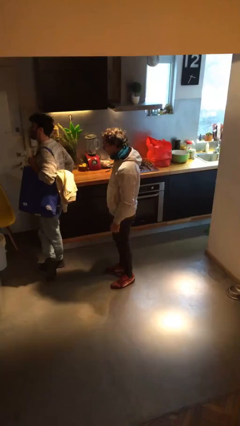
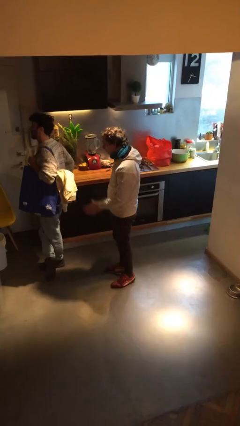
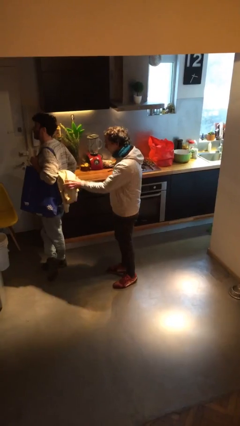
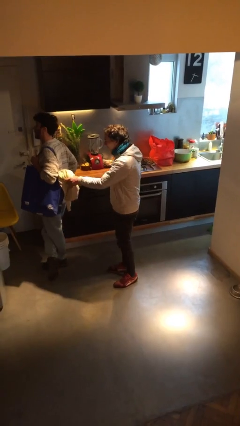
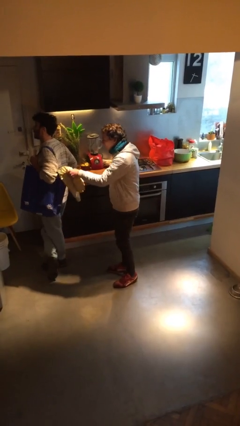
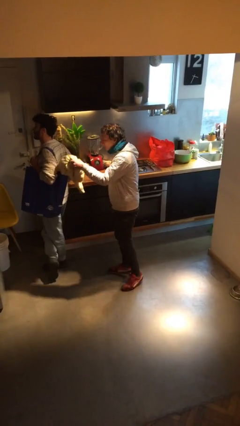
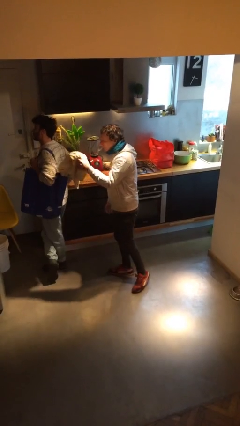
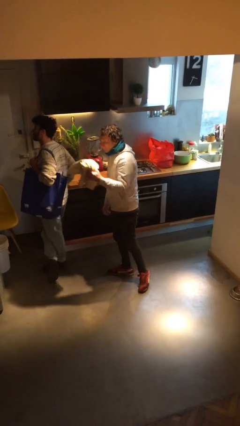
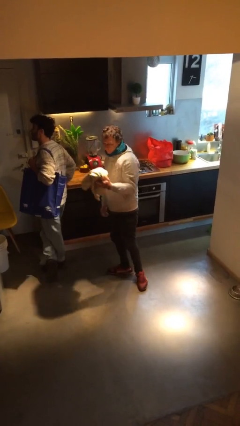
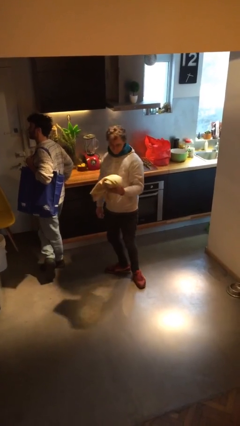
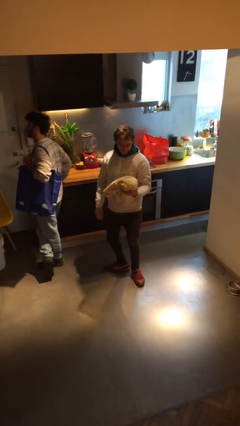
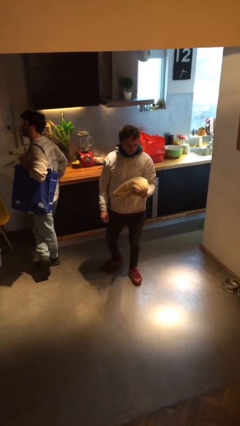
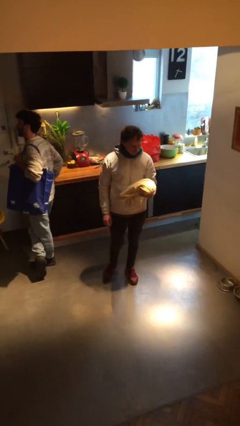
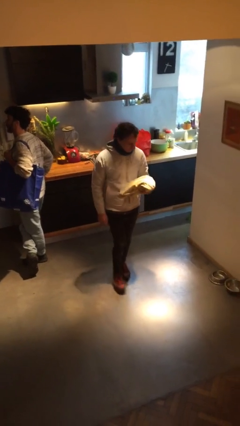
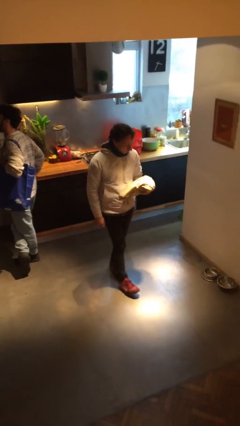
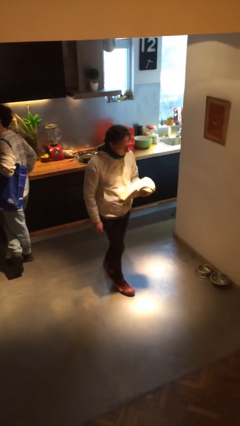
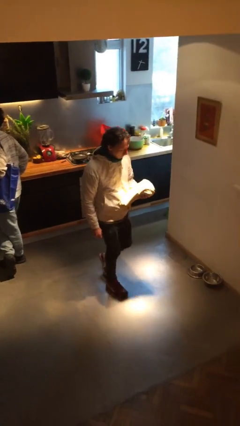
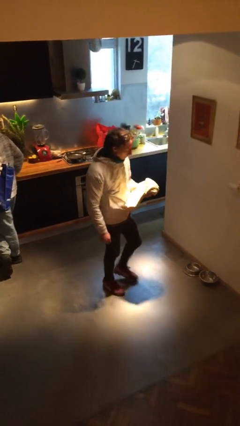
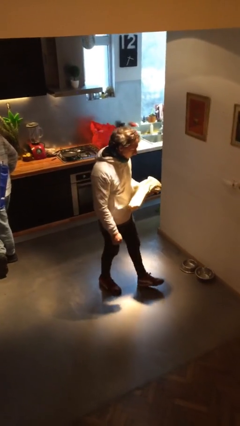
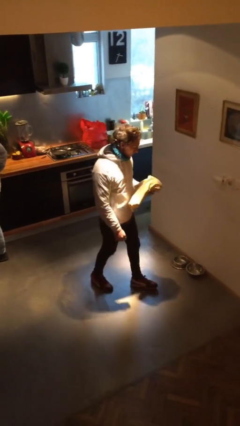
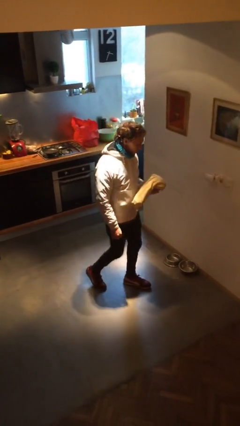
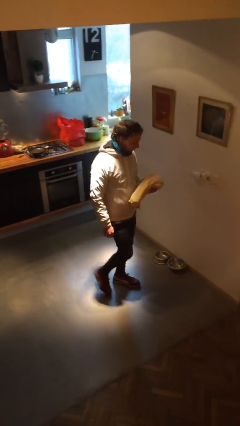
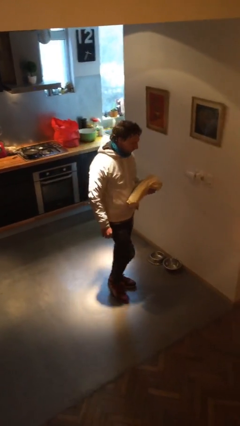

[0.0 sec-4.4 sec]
person steals object from person

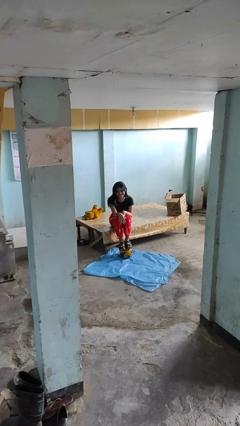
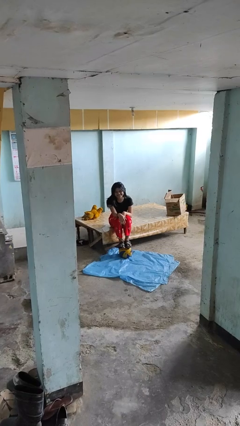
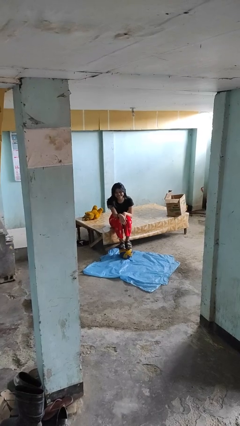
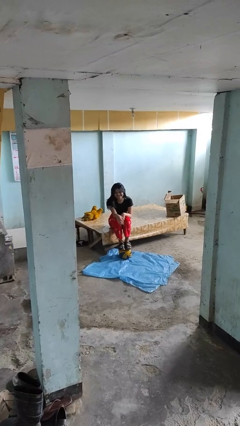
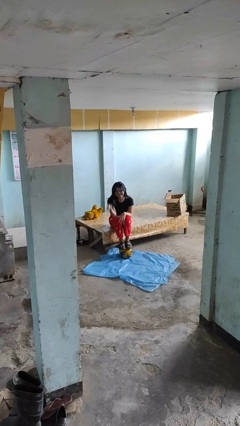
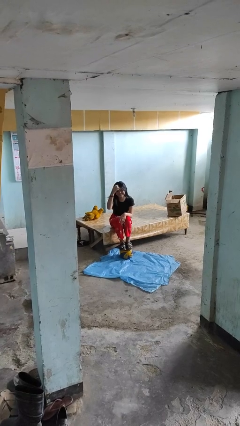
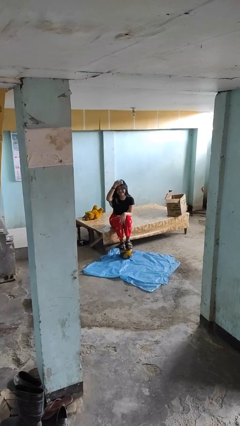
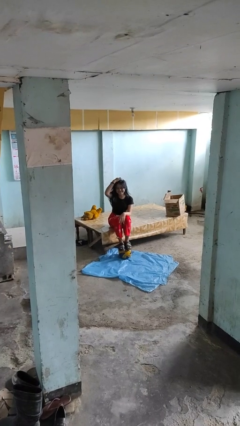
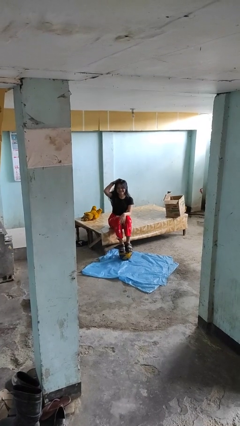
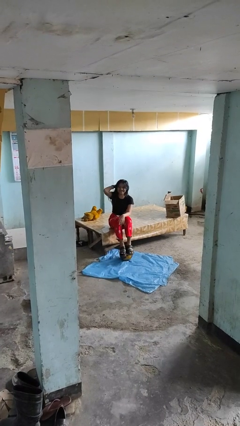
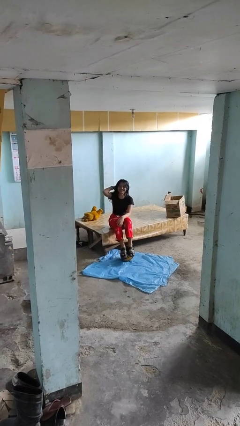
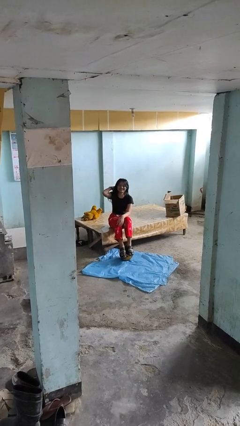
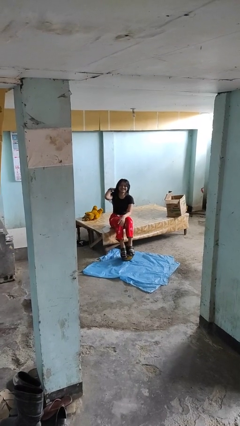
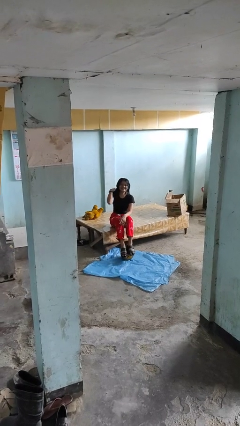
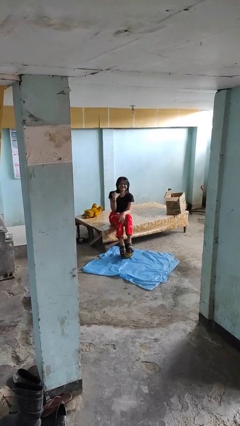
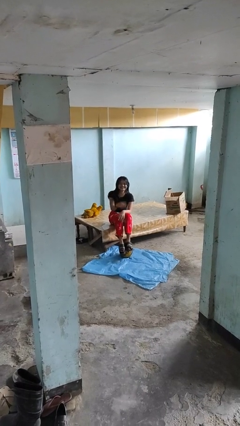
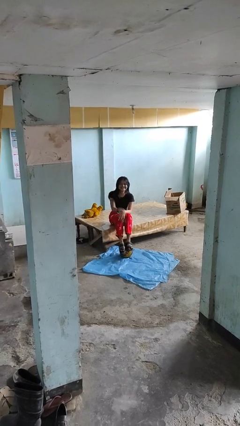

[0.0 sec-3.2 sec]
person strokes hair

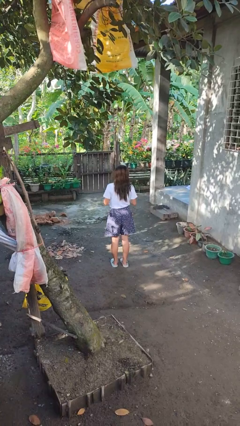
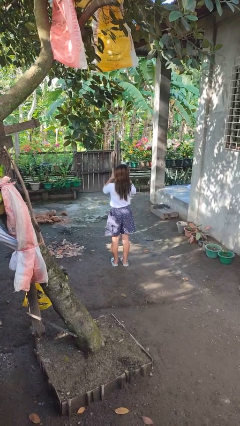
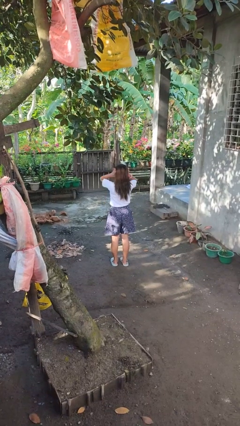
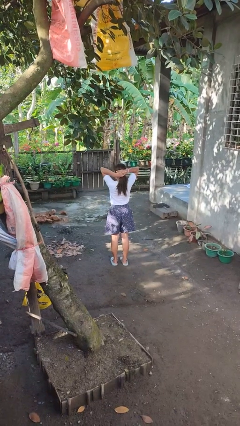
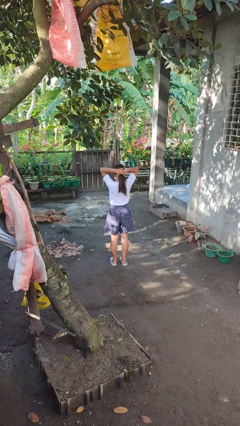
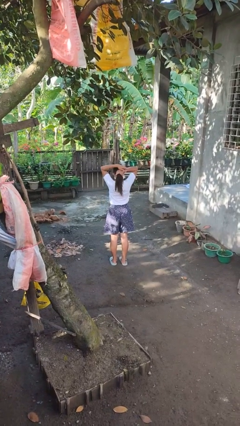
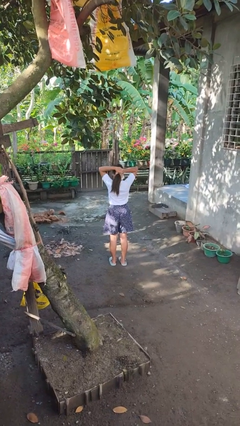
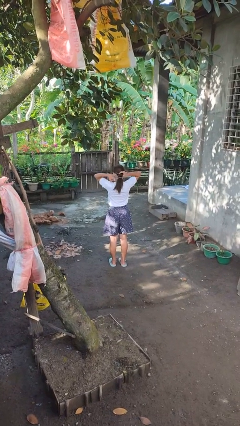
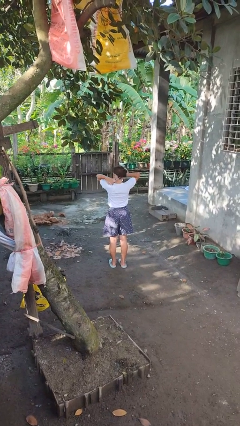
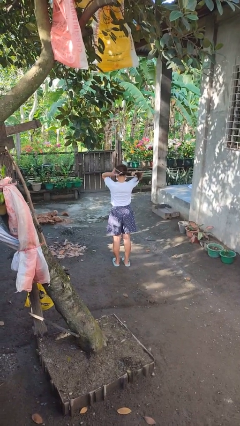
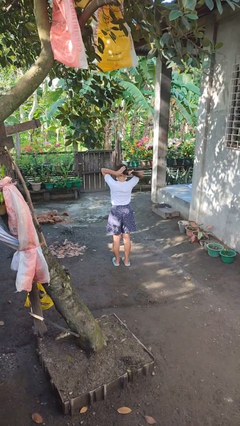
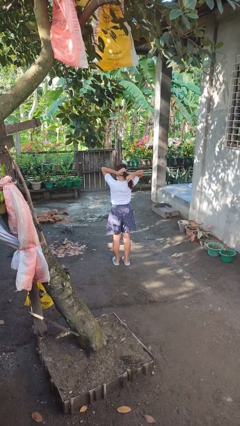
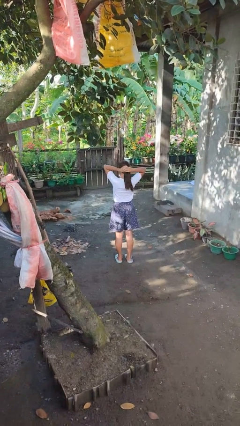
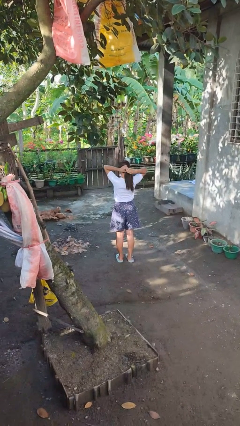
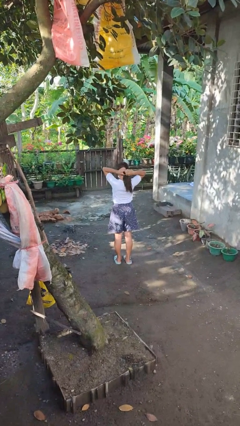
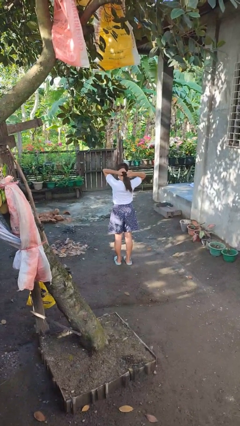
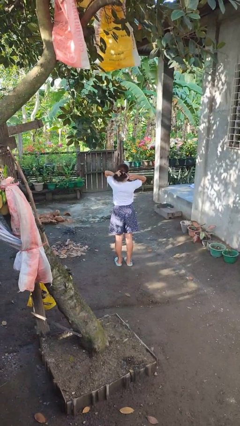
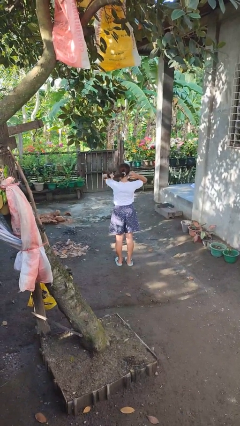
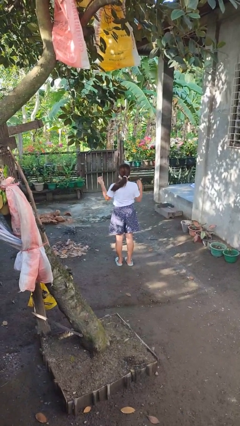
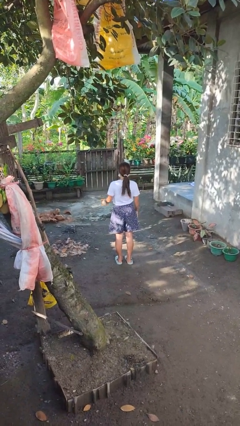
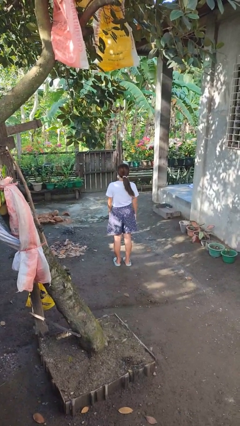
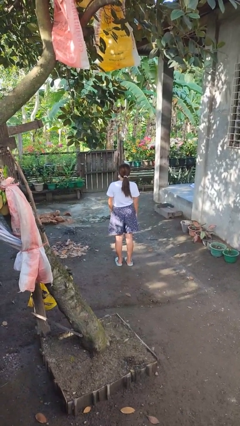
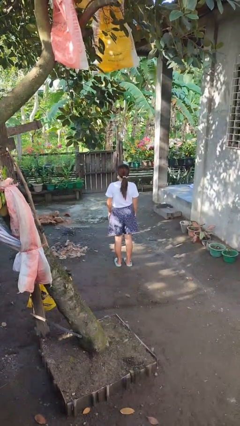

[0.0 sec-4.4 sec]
person puts hair in ponytail

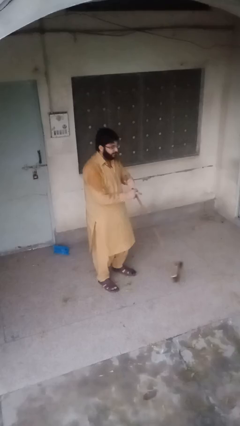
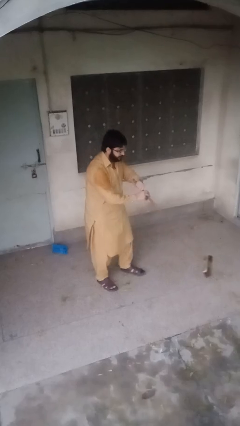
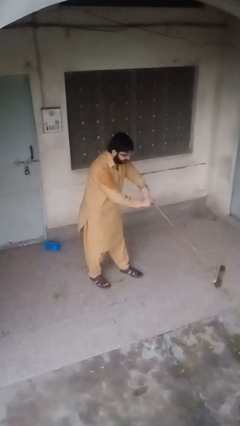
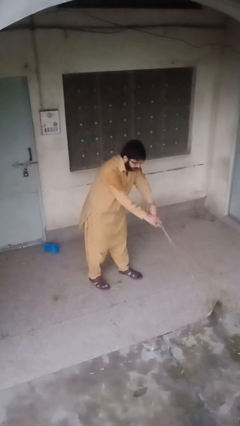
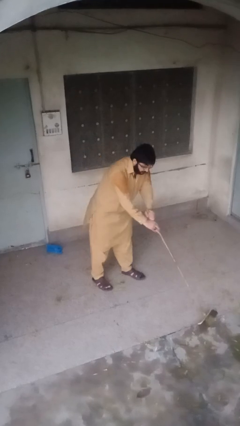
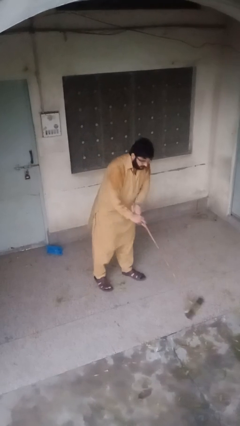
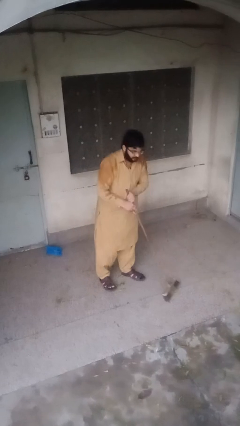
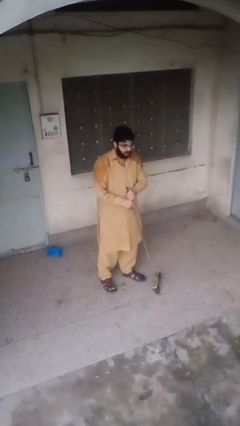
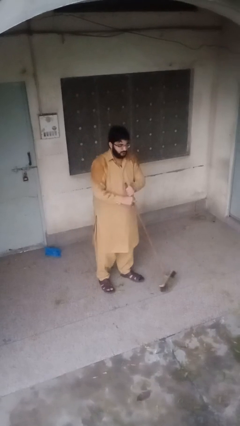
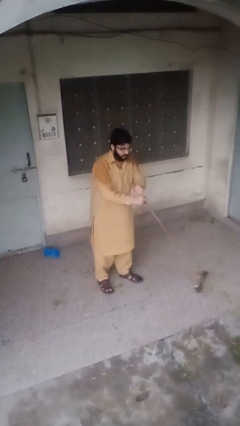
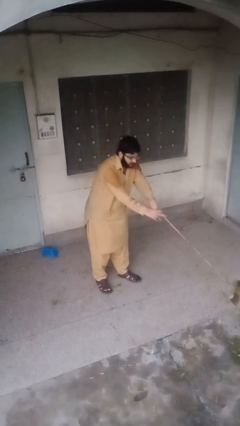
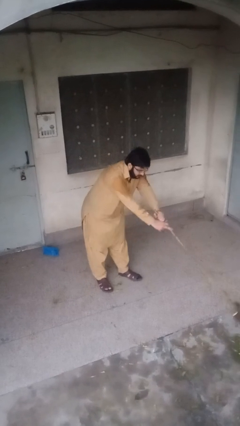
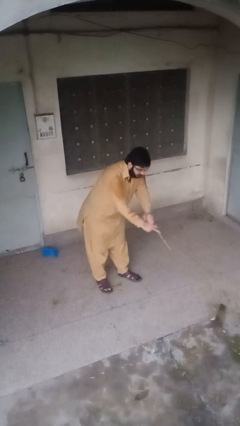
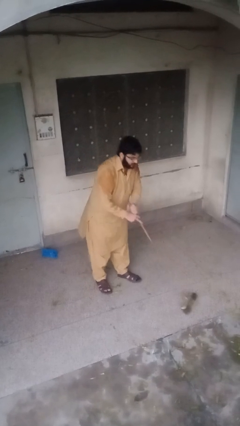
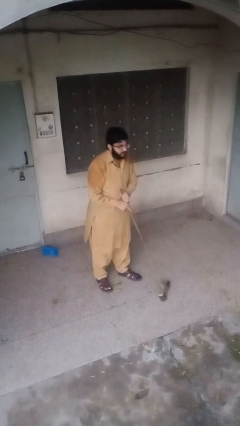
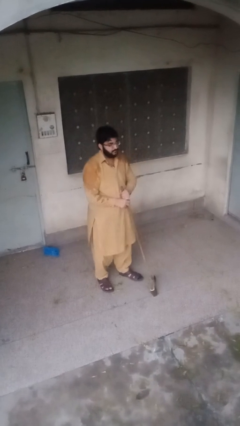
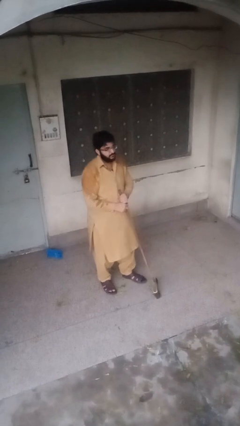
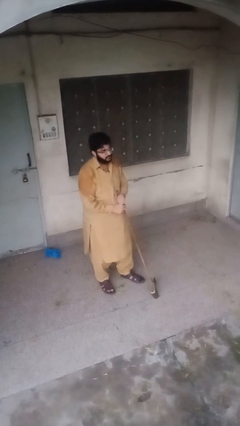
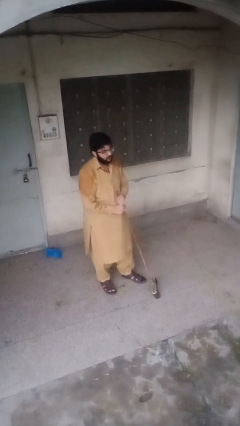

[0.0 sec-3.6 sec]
person sweeps floor

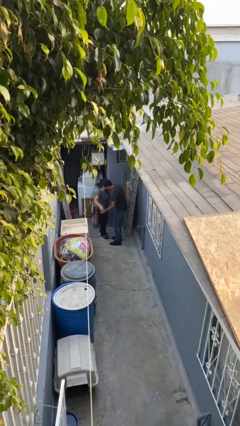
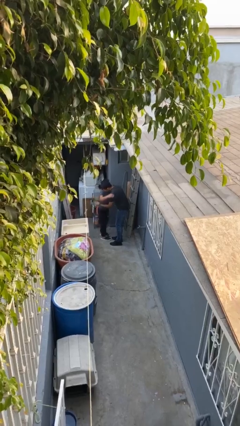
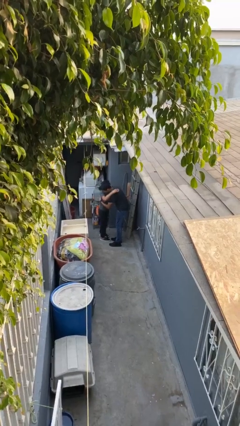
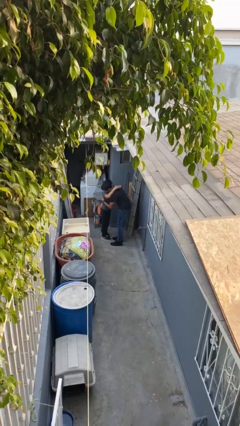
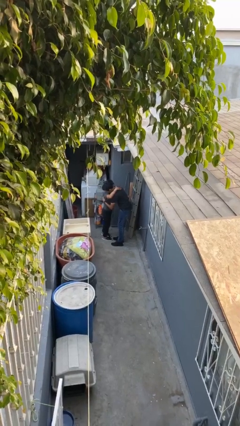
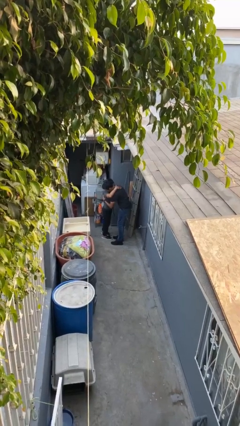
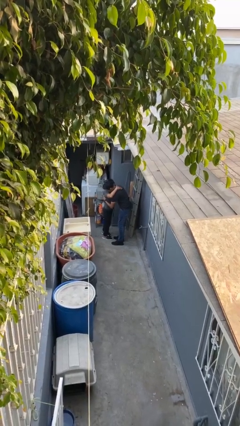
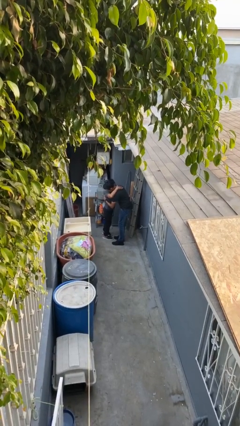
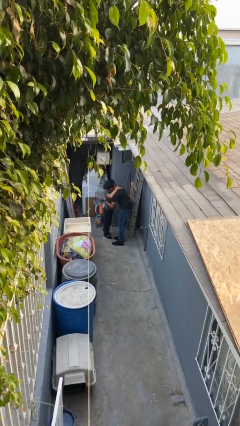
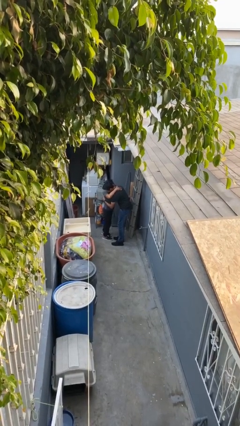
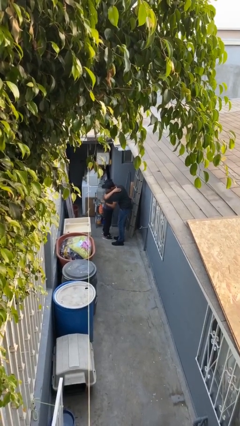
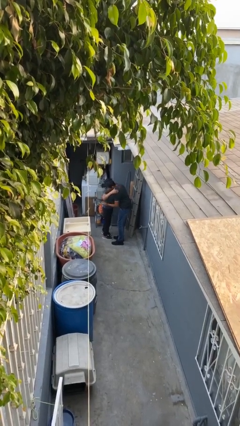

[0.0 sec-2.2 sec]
person embraces person
